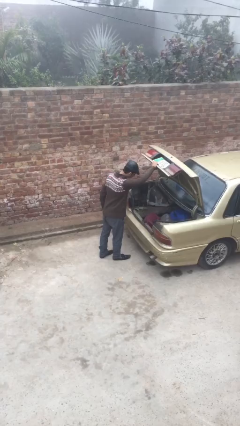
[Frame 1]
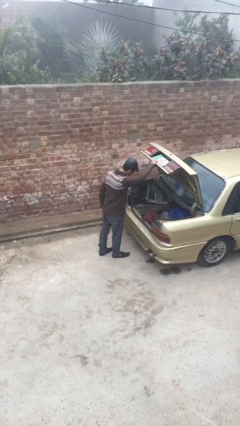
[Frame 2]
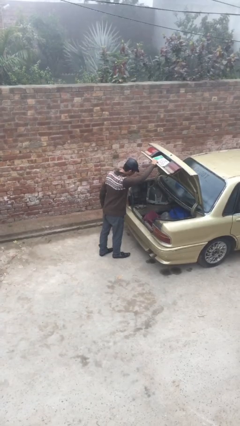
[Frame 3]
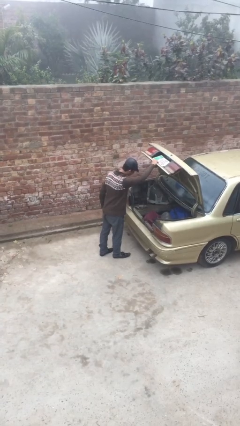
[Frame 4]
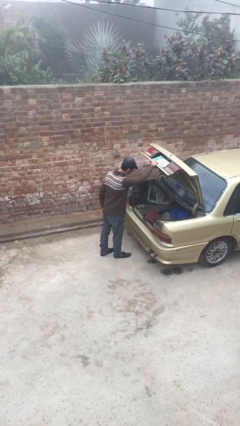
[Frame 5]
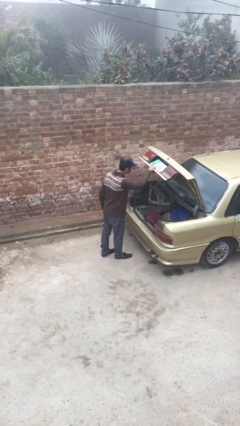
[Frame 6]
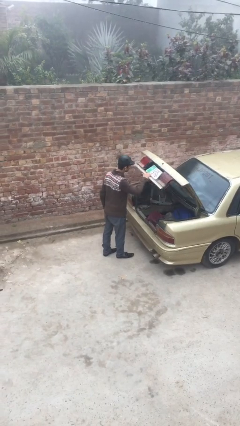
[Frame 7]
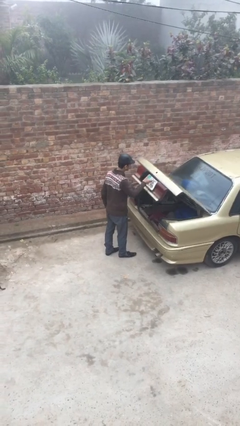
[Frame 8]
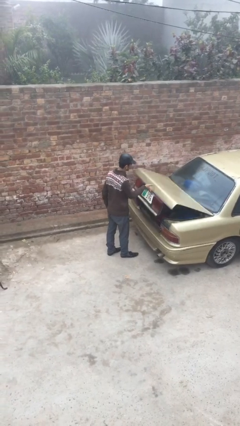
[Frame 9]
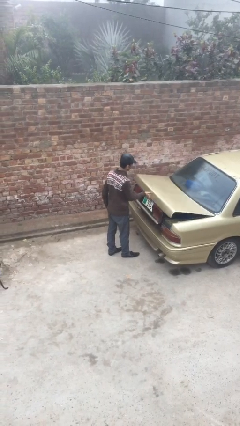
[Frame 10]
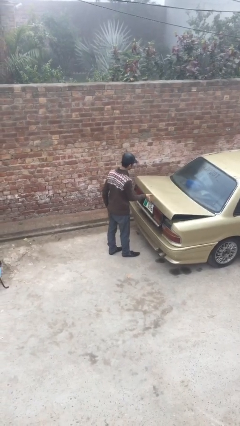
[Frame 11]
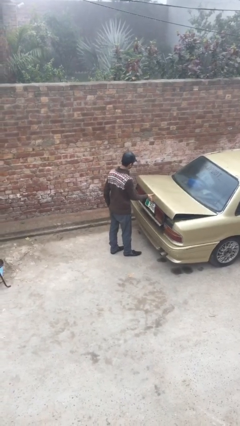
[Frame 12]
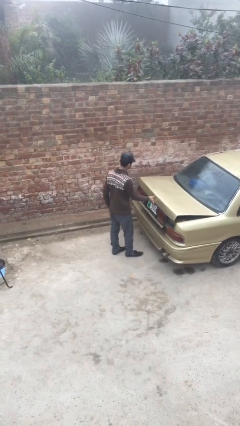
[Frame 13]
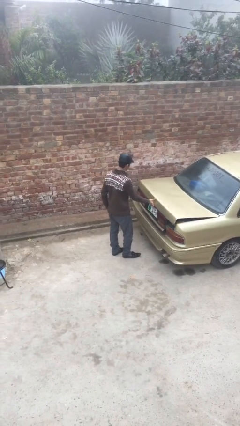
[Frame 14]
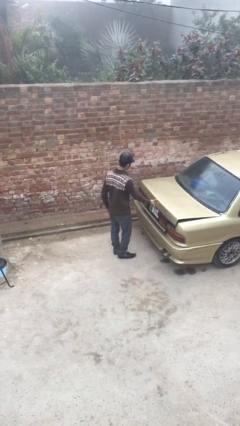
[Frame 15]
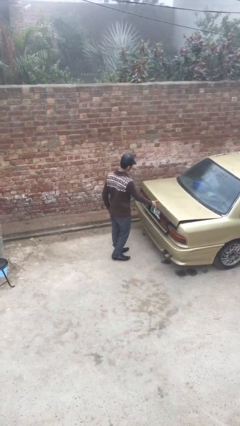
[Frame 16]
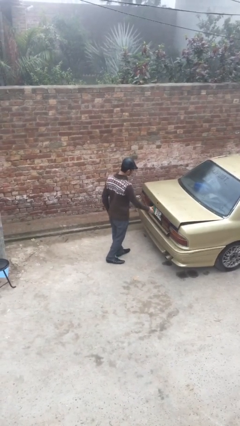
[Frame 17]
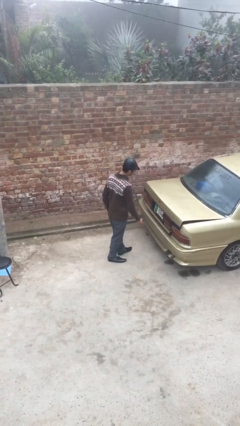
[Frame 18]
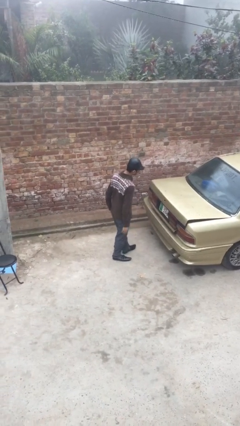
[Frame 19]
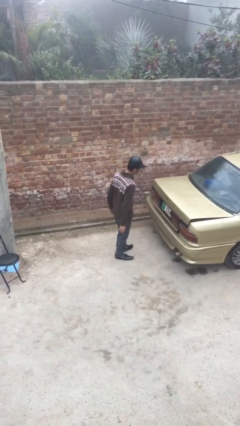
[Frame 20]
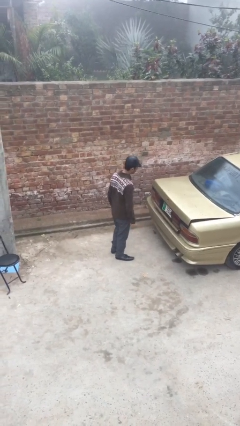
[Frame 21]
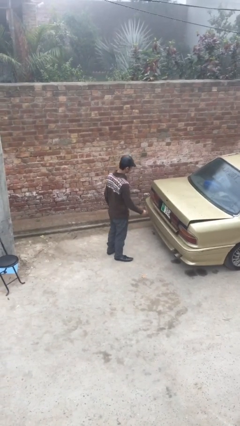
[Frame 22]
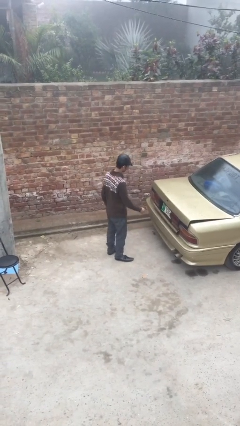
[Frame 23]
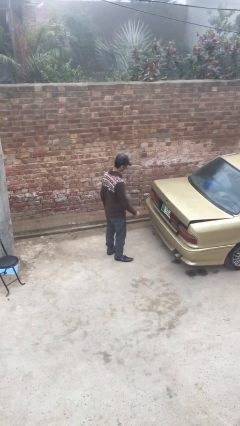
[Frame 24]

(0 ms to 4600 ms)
person closes car trunk

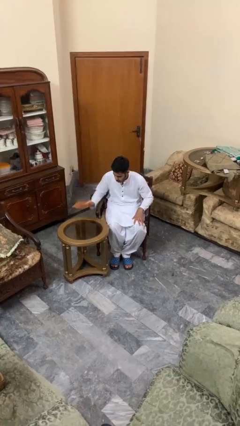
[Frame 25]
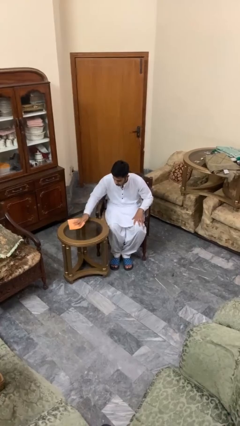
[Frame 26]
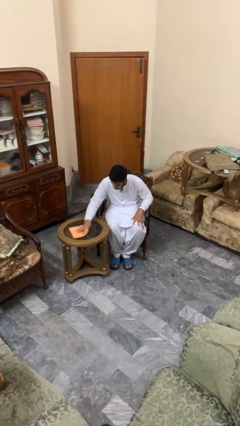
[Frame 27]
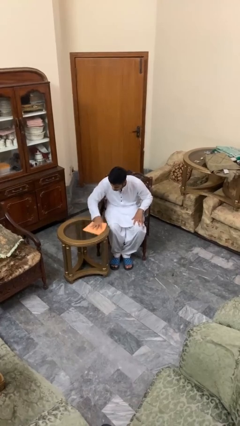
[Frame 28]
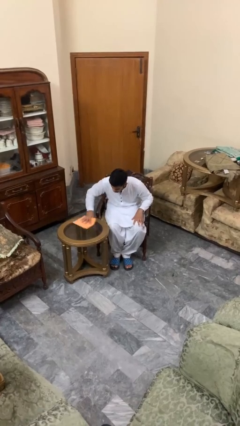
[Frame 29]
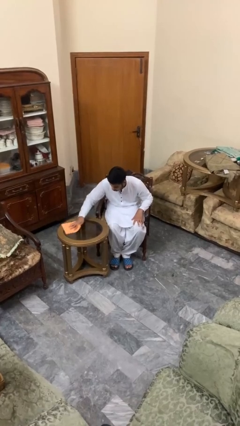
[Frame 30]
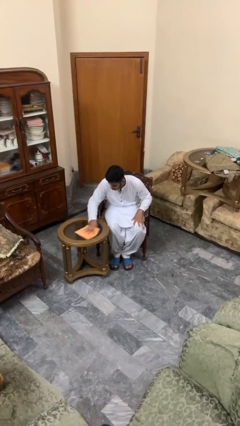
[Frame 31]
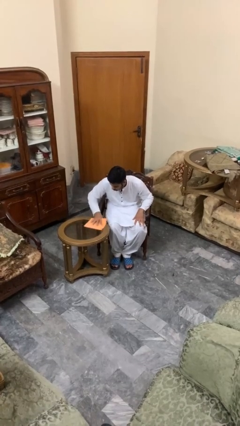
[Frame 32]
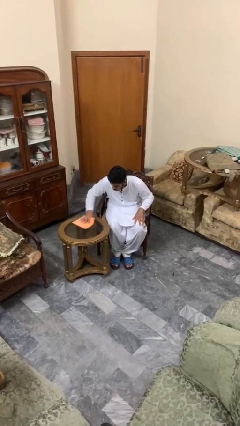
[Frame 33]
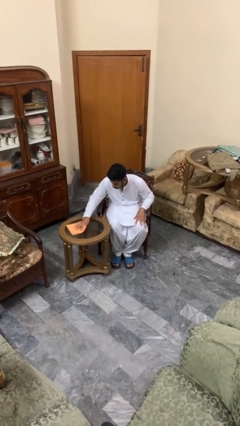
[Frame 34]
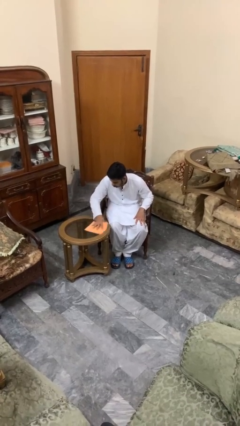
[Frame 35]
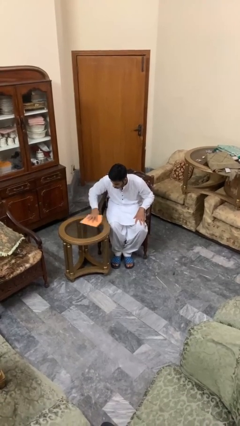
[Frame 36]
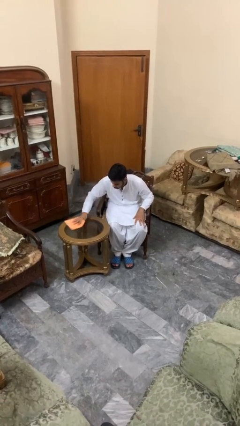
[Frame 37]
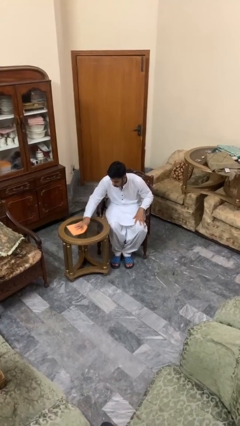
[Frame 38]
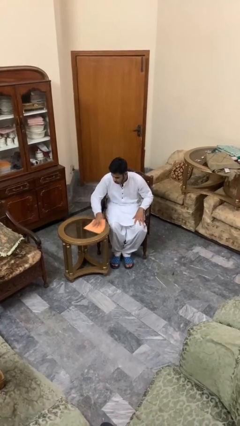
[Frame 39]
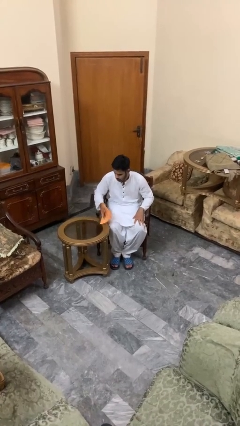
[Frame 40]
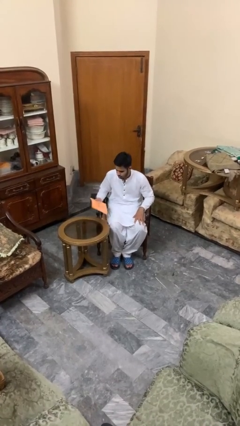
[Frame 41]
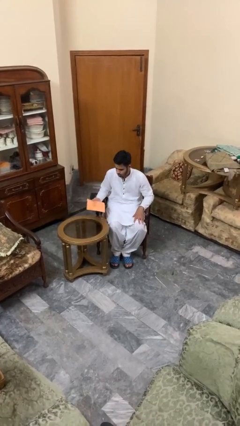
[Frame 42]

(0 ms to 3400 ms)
person cleans table with rag

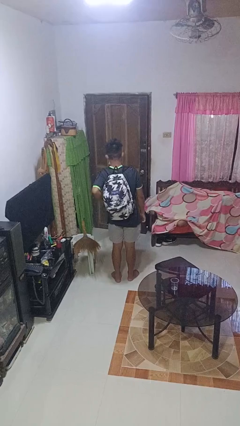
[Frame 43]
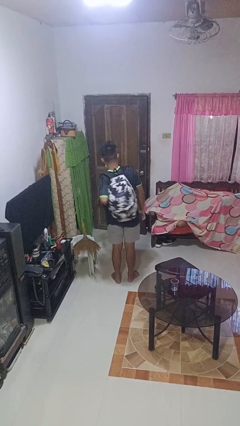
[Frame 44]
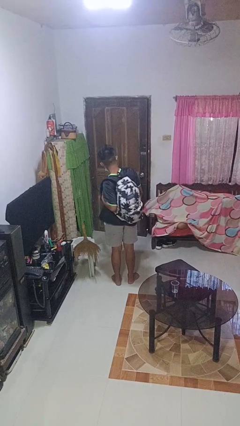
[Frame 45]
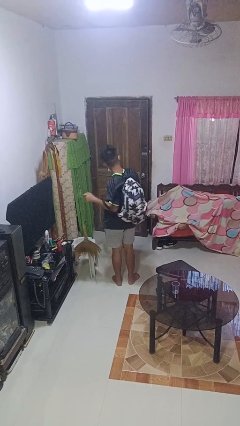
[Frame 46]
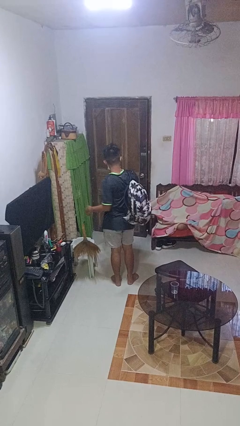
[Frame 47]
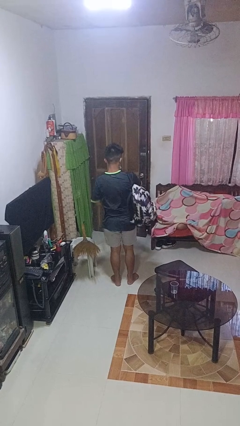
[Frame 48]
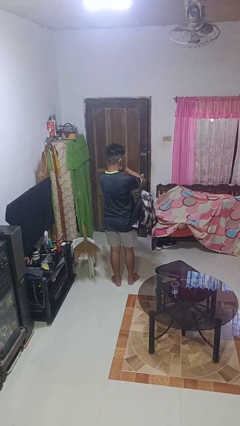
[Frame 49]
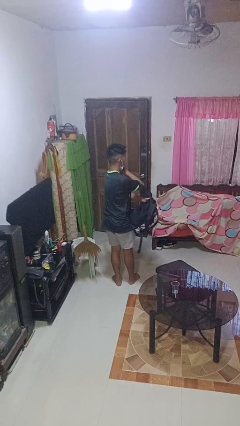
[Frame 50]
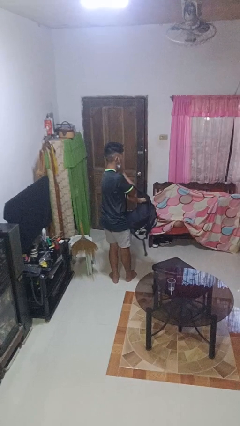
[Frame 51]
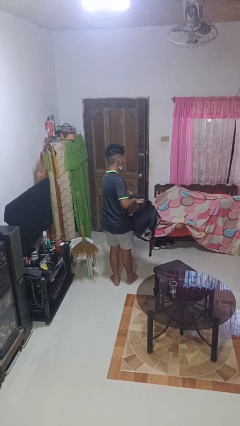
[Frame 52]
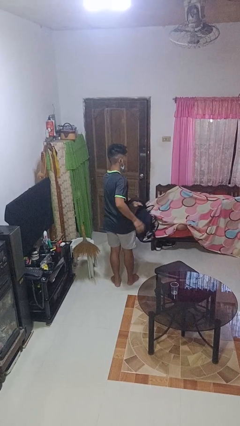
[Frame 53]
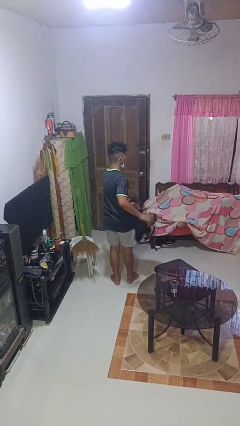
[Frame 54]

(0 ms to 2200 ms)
person takes off backpack

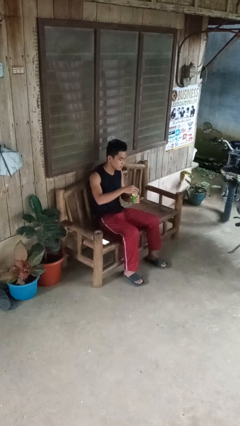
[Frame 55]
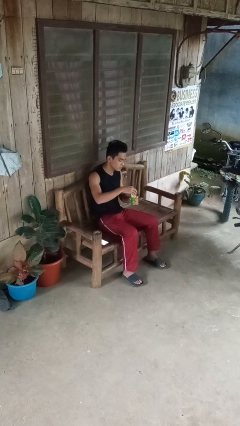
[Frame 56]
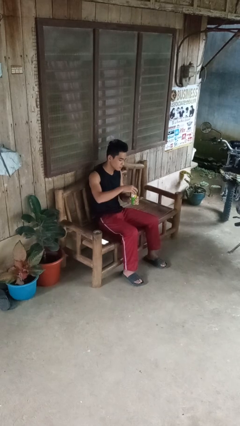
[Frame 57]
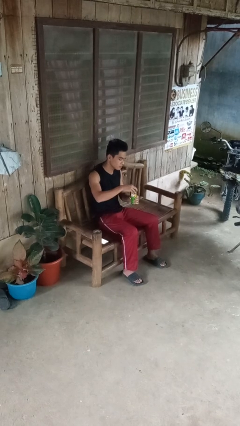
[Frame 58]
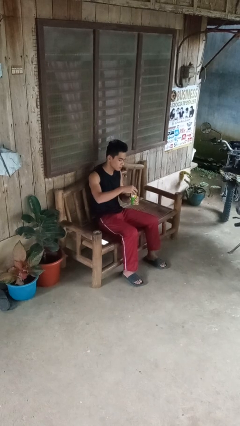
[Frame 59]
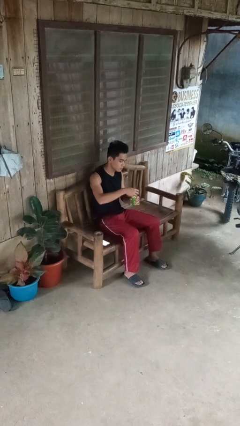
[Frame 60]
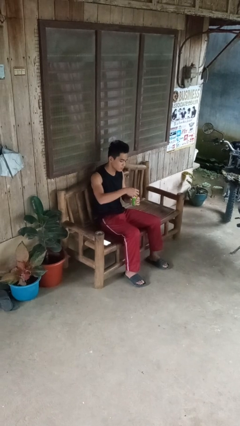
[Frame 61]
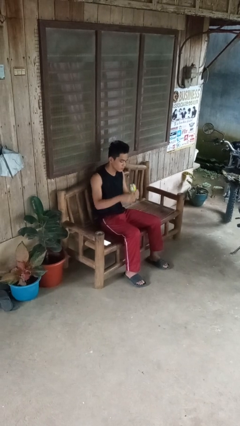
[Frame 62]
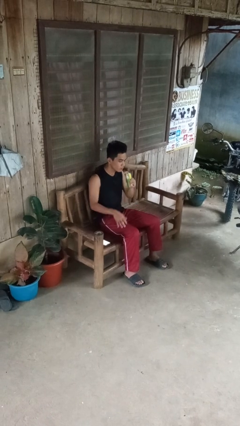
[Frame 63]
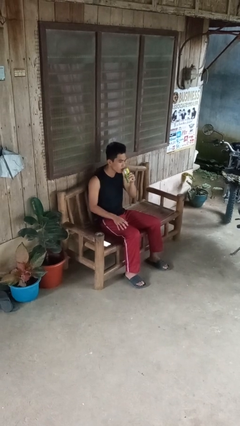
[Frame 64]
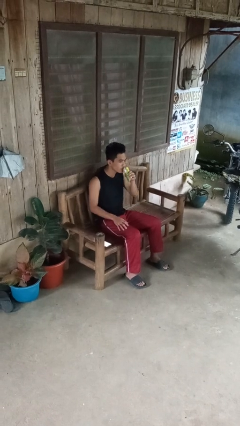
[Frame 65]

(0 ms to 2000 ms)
person opens beverage can

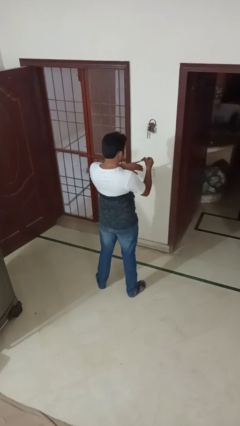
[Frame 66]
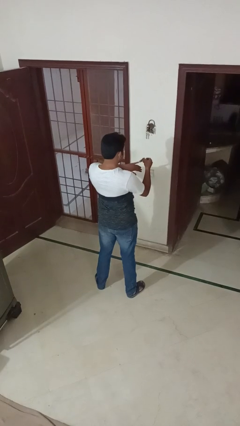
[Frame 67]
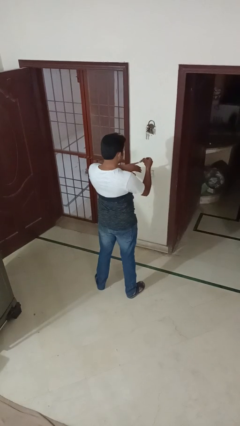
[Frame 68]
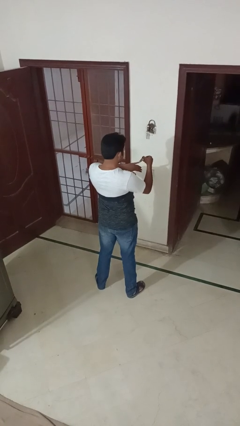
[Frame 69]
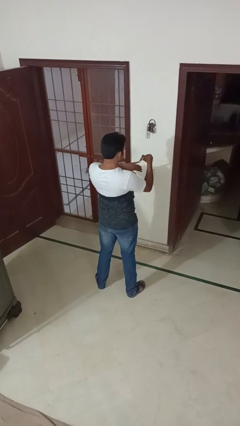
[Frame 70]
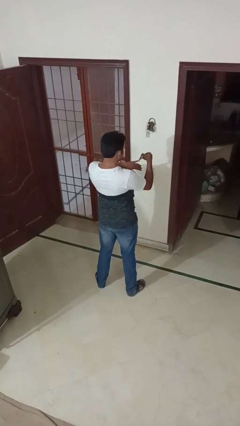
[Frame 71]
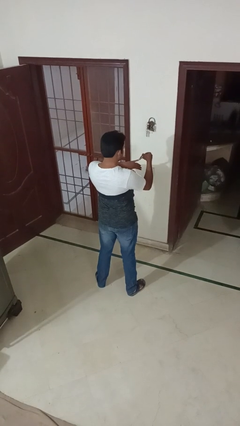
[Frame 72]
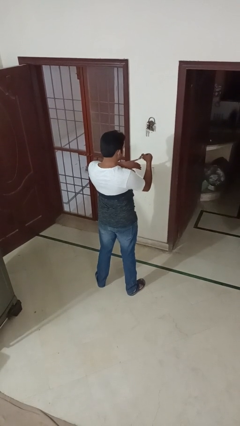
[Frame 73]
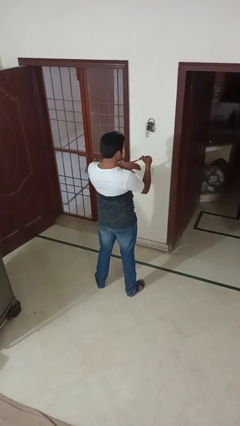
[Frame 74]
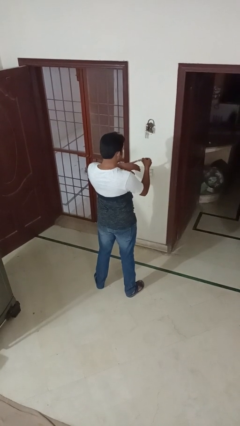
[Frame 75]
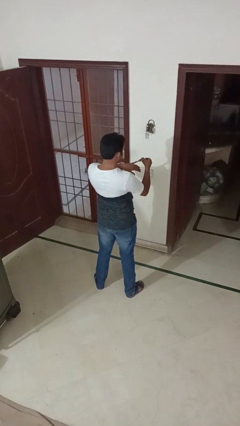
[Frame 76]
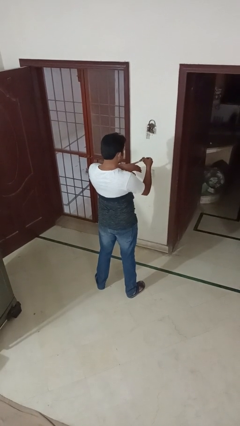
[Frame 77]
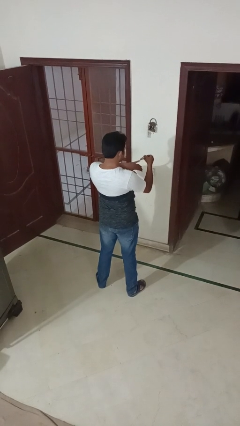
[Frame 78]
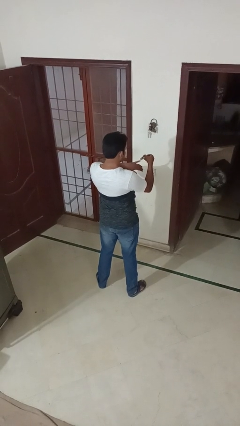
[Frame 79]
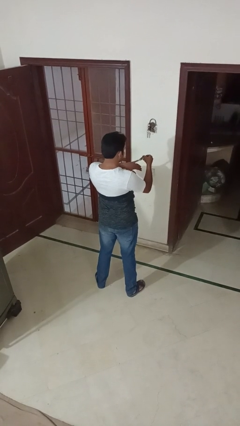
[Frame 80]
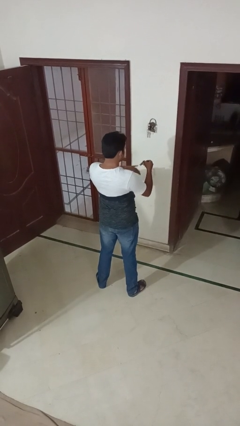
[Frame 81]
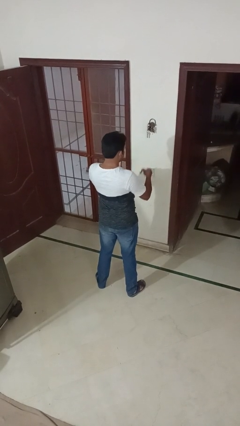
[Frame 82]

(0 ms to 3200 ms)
person clips fingernails

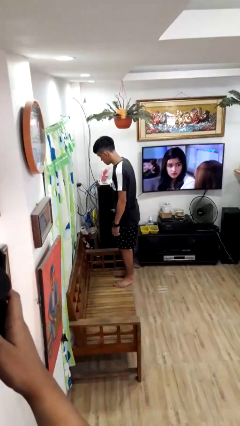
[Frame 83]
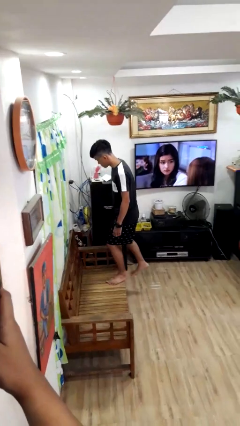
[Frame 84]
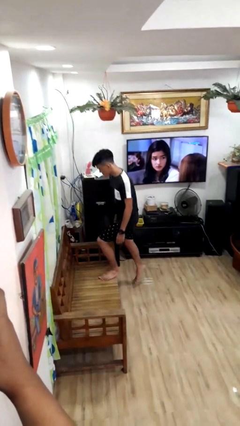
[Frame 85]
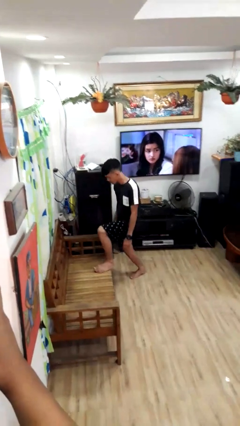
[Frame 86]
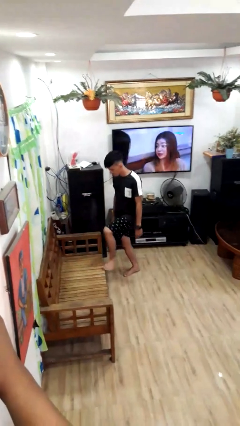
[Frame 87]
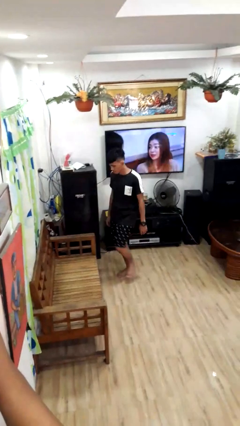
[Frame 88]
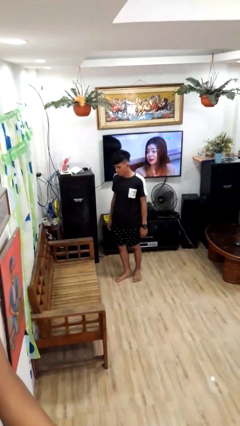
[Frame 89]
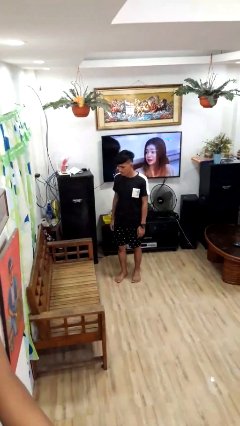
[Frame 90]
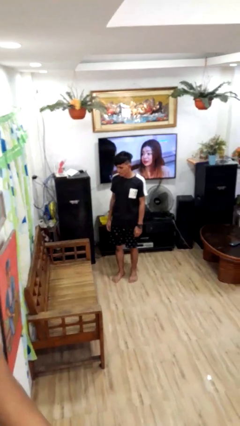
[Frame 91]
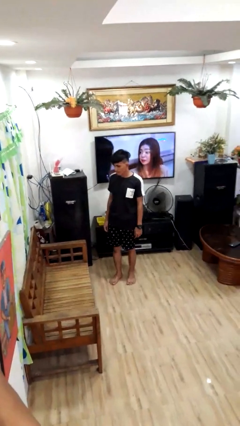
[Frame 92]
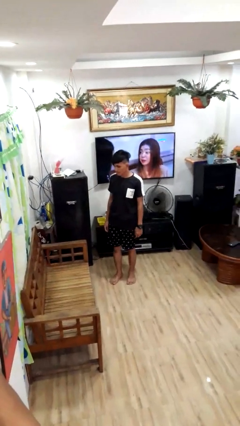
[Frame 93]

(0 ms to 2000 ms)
person climbs off couch

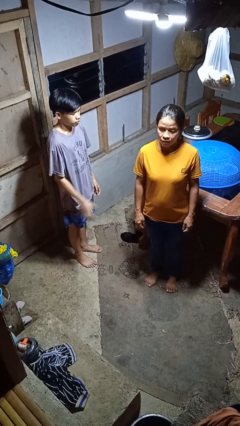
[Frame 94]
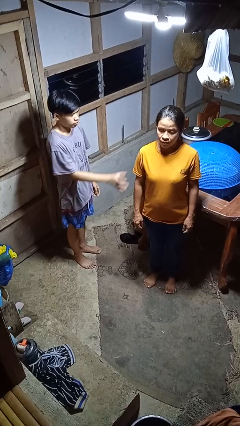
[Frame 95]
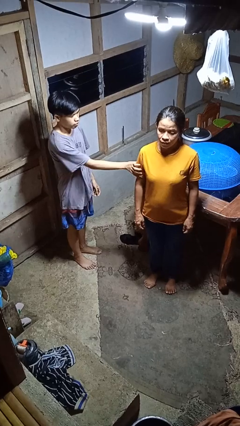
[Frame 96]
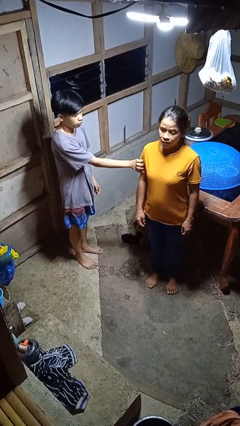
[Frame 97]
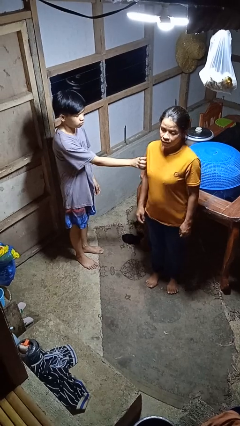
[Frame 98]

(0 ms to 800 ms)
person grabs person by bicep
